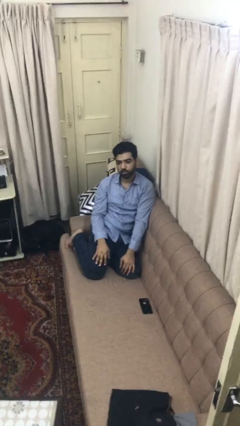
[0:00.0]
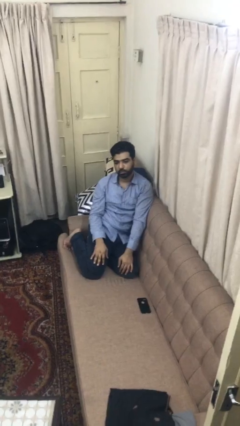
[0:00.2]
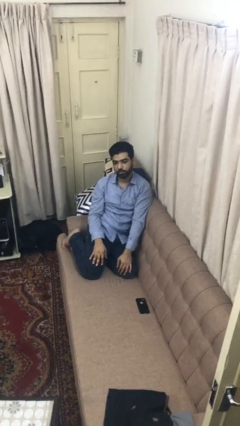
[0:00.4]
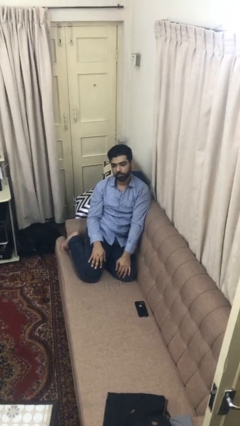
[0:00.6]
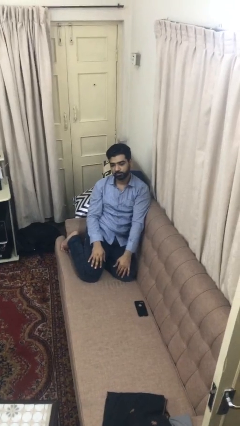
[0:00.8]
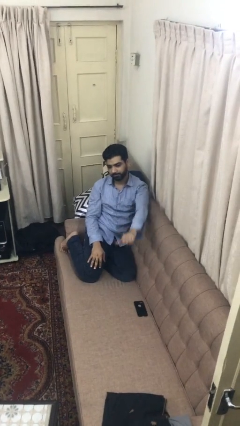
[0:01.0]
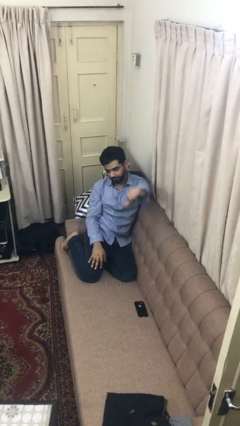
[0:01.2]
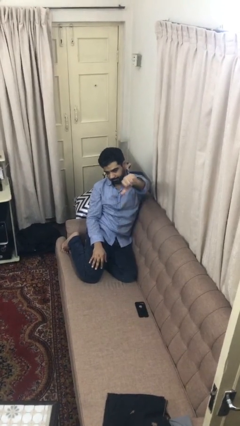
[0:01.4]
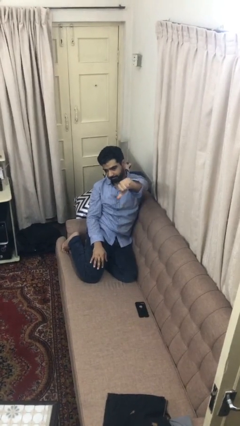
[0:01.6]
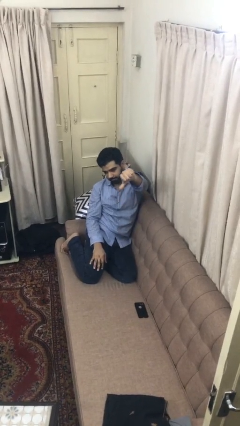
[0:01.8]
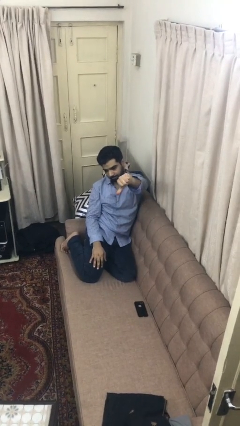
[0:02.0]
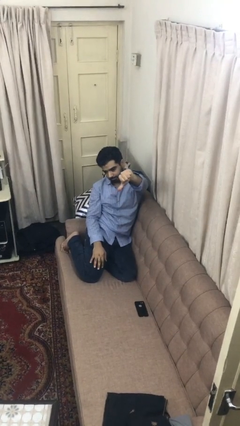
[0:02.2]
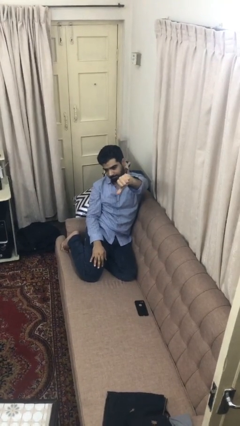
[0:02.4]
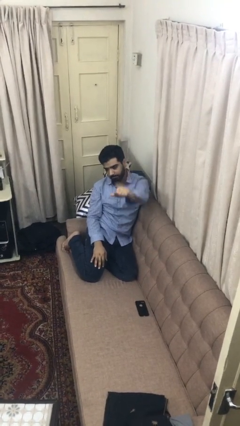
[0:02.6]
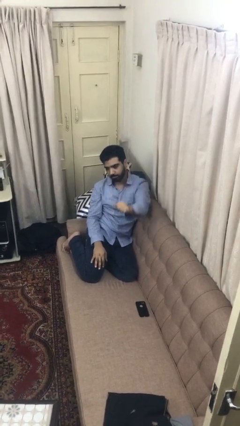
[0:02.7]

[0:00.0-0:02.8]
person gestures thumbs down

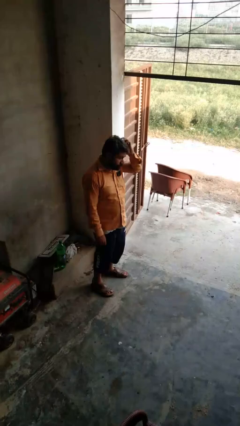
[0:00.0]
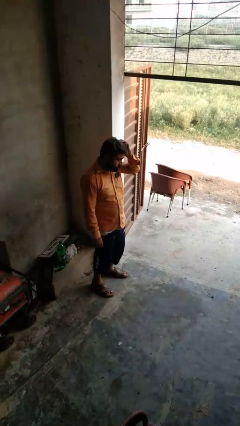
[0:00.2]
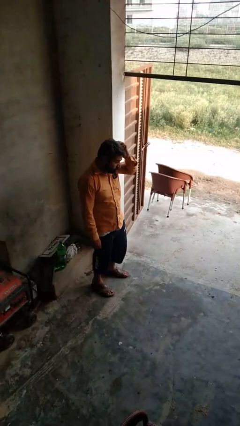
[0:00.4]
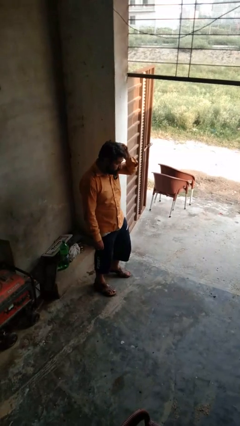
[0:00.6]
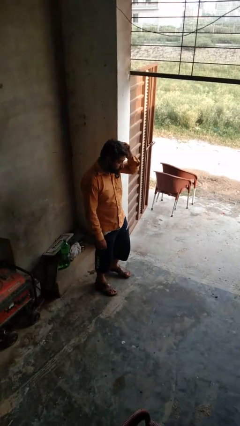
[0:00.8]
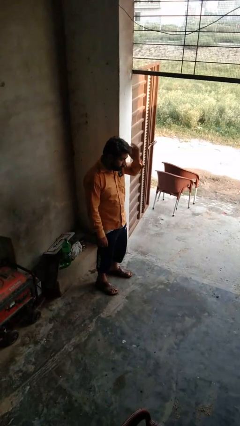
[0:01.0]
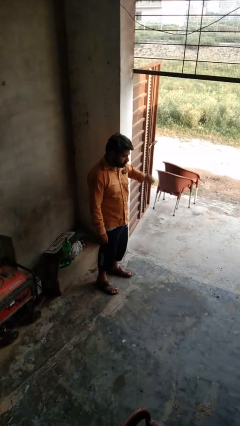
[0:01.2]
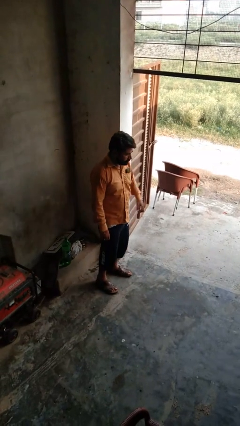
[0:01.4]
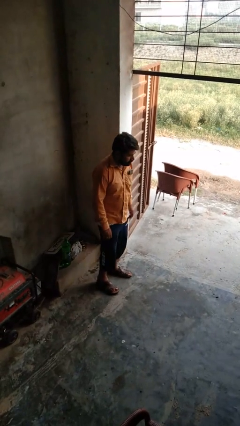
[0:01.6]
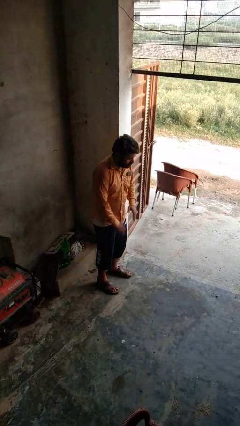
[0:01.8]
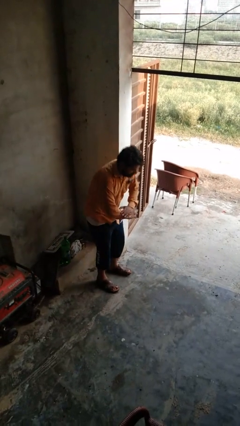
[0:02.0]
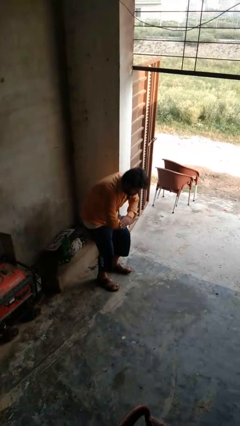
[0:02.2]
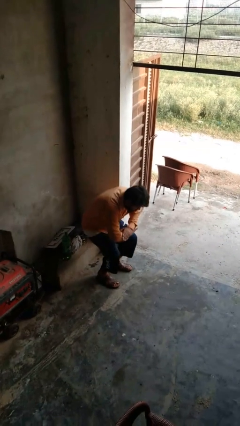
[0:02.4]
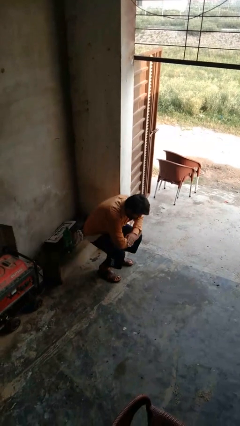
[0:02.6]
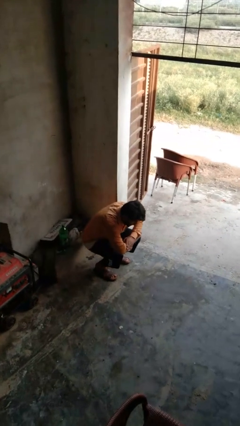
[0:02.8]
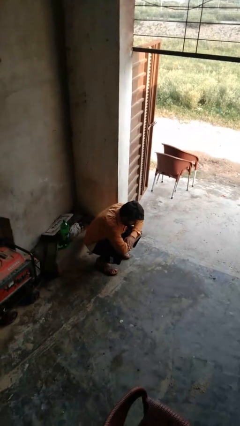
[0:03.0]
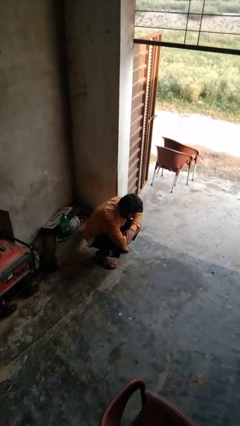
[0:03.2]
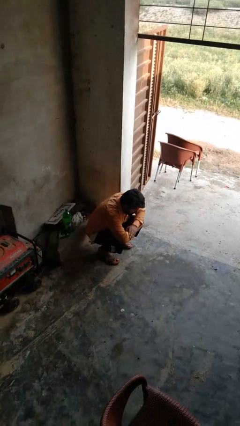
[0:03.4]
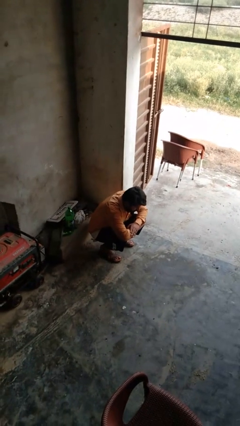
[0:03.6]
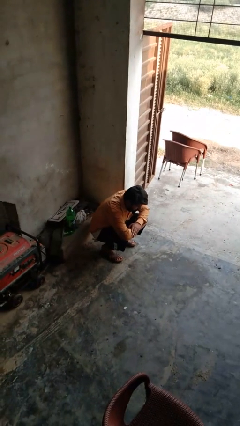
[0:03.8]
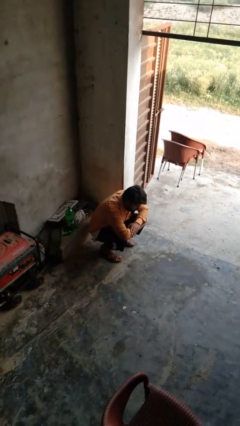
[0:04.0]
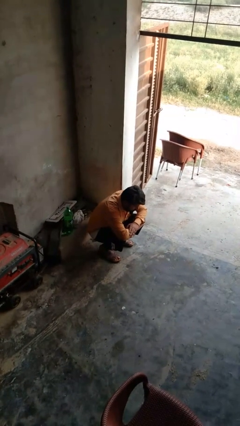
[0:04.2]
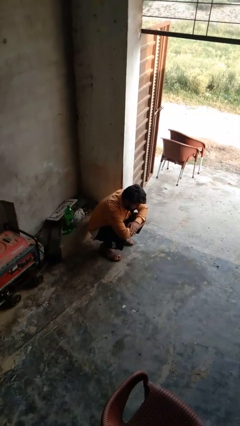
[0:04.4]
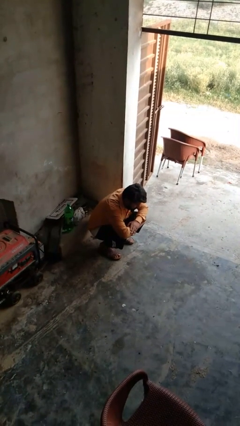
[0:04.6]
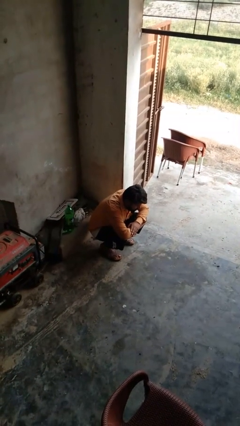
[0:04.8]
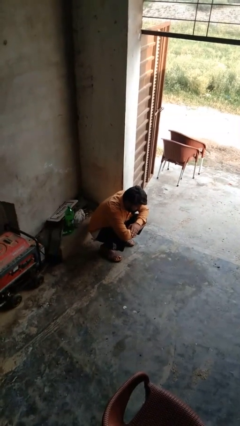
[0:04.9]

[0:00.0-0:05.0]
person squats

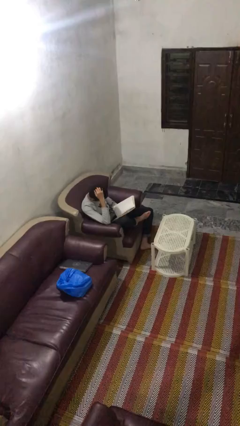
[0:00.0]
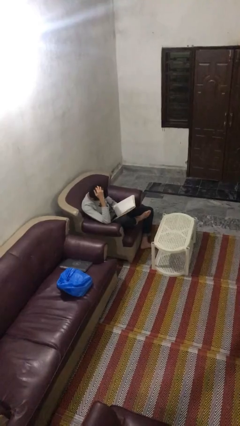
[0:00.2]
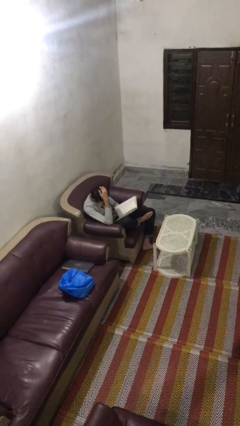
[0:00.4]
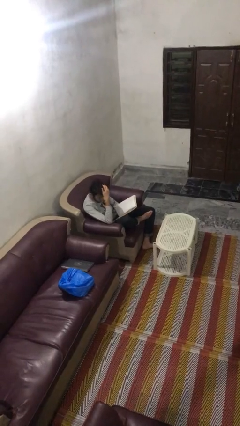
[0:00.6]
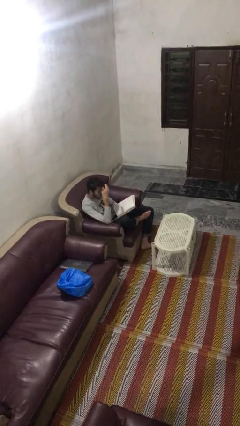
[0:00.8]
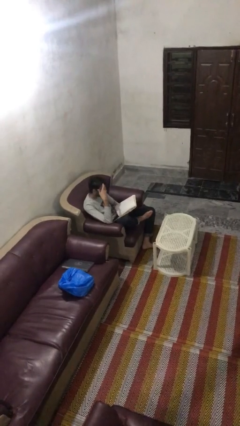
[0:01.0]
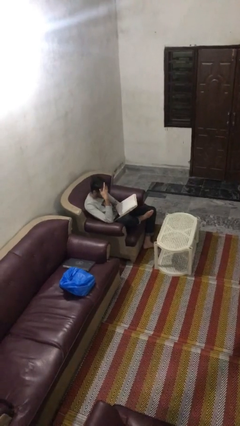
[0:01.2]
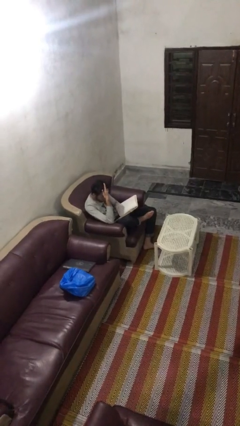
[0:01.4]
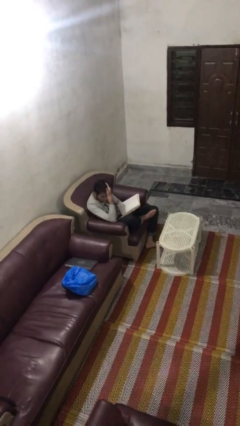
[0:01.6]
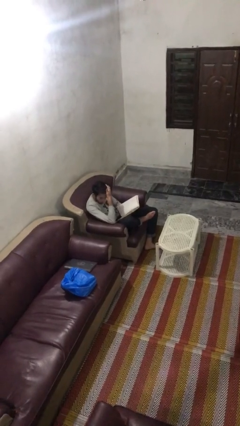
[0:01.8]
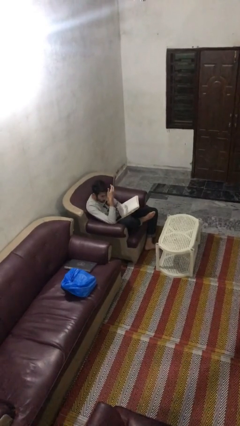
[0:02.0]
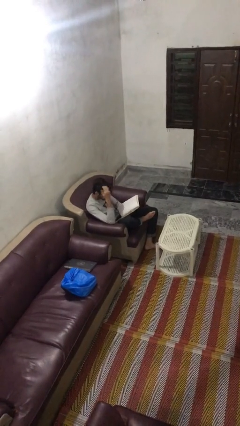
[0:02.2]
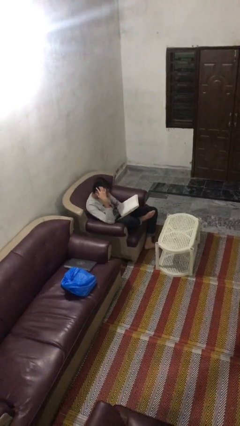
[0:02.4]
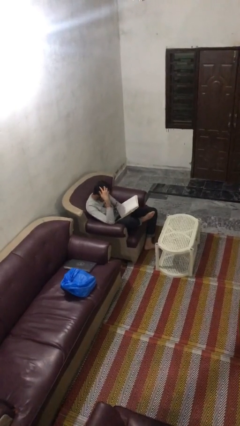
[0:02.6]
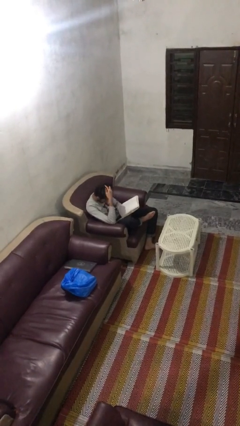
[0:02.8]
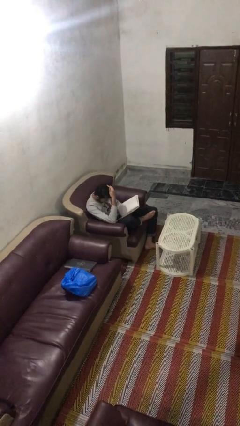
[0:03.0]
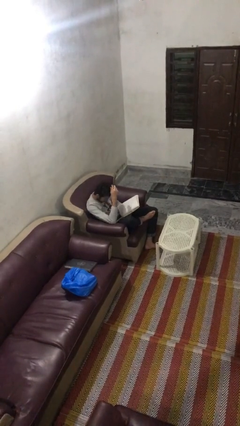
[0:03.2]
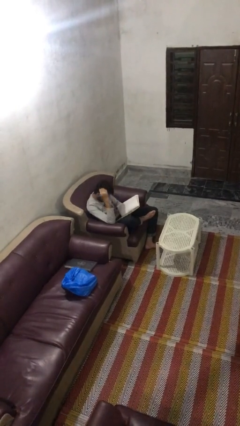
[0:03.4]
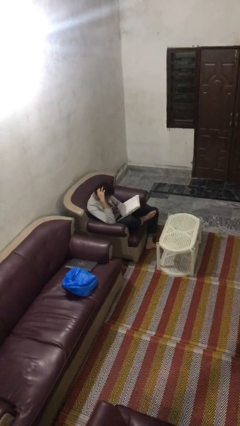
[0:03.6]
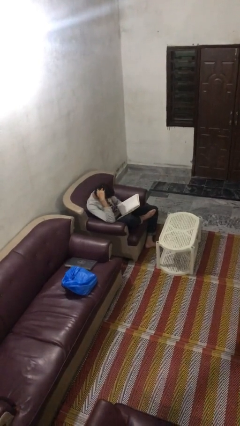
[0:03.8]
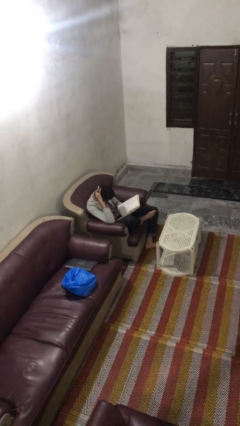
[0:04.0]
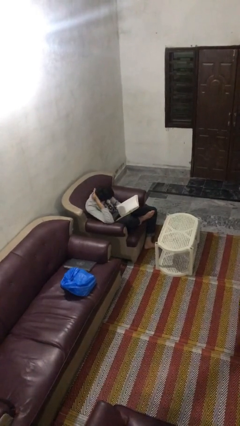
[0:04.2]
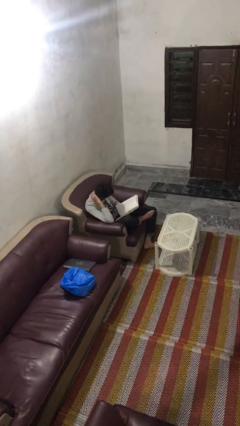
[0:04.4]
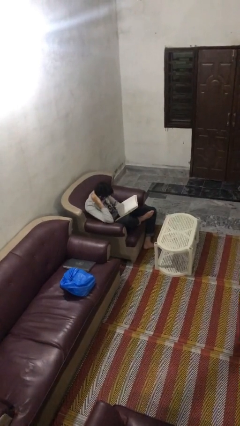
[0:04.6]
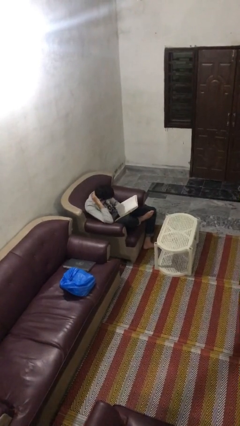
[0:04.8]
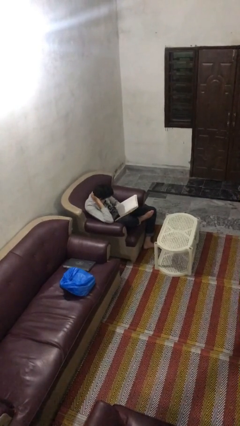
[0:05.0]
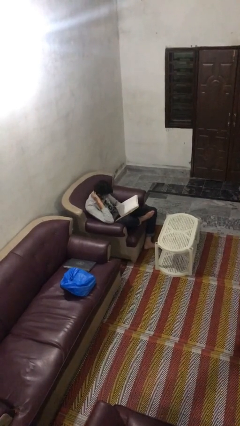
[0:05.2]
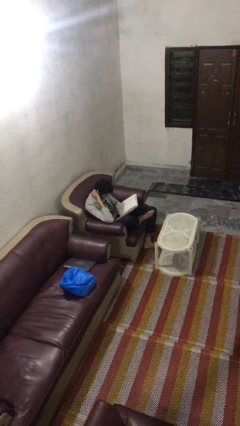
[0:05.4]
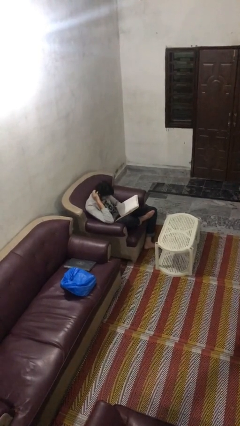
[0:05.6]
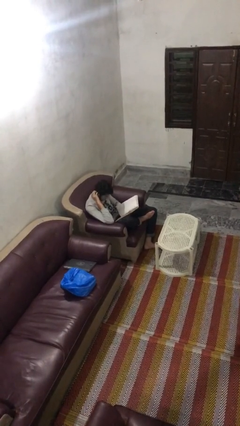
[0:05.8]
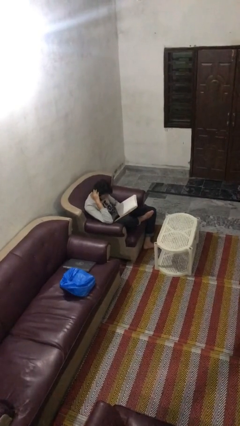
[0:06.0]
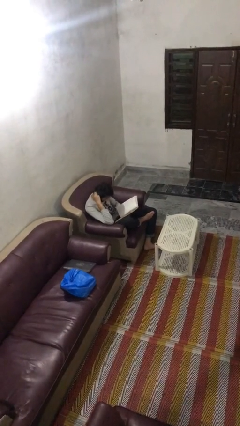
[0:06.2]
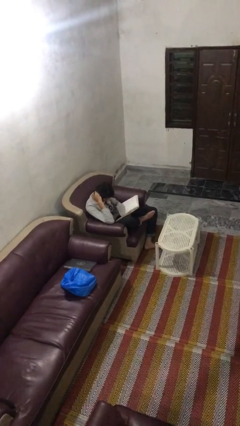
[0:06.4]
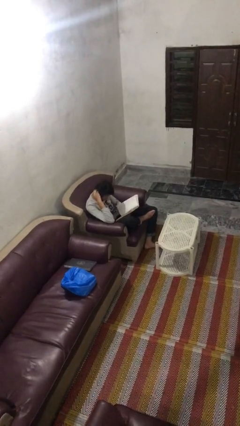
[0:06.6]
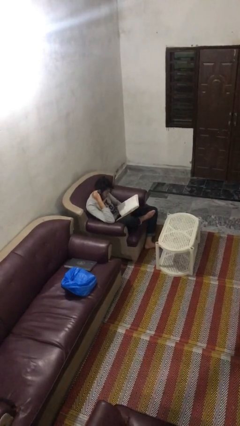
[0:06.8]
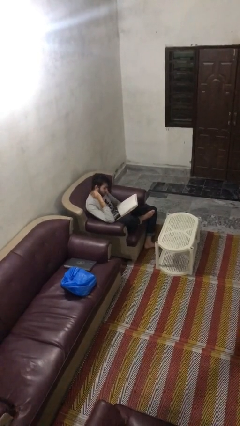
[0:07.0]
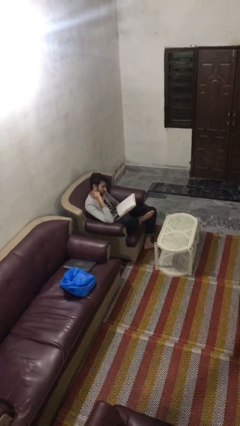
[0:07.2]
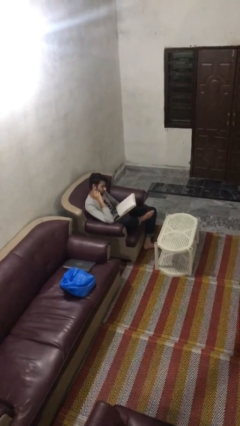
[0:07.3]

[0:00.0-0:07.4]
person reads document

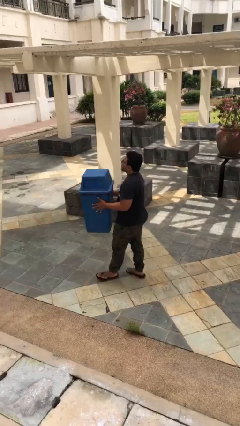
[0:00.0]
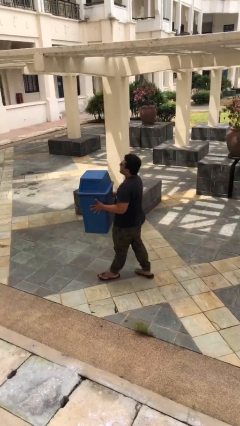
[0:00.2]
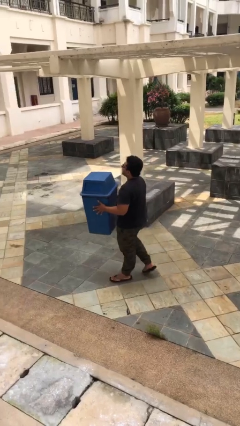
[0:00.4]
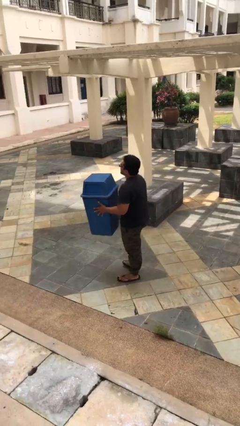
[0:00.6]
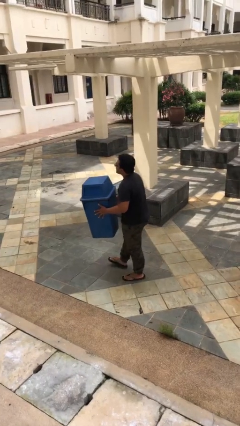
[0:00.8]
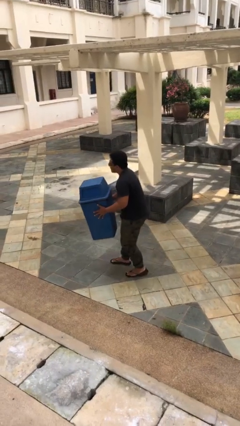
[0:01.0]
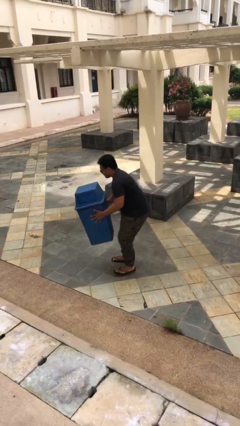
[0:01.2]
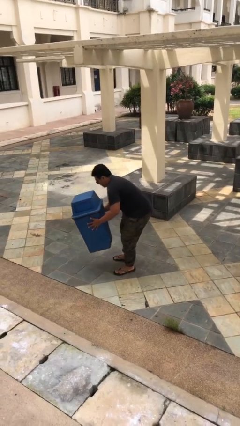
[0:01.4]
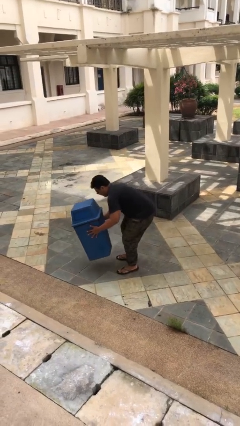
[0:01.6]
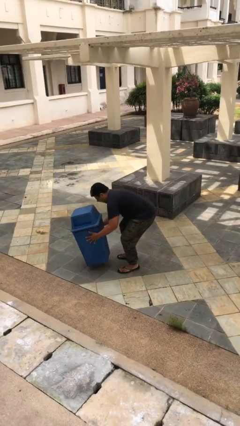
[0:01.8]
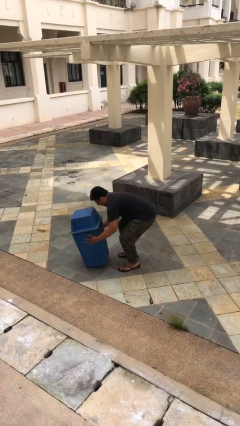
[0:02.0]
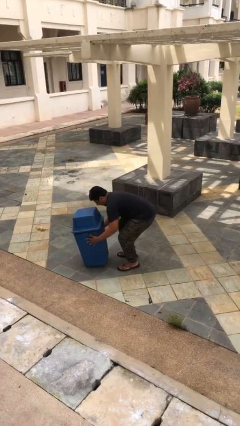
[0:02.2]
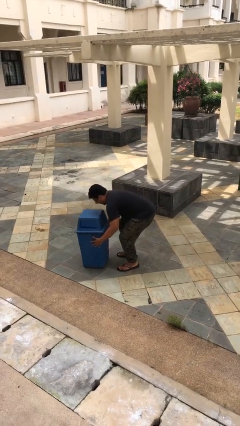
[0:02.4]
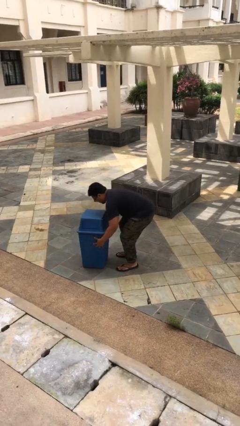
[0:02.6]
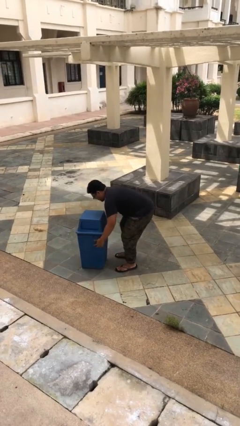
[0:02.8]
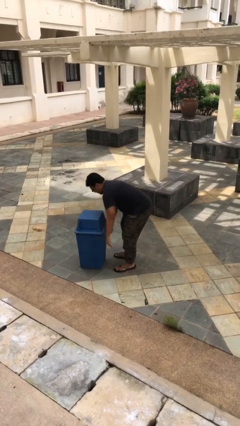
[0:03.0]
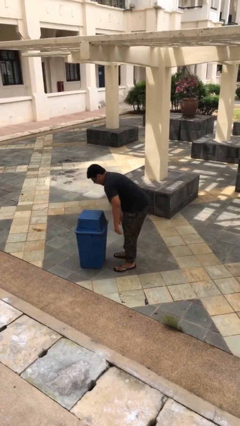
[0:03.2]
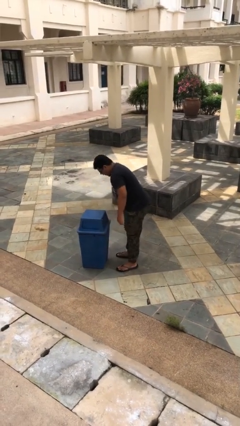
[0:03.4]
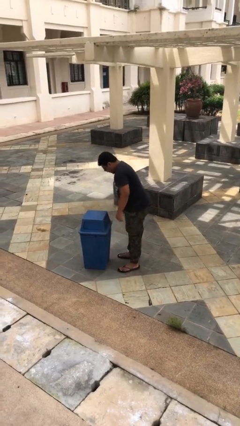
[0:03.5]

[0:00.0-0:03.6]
person puts down object on floor
